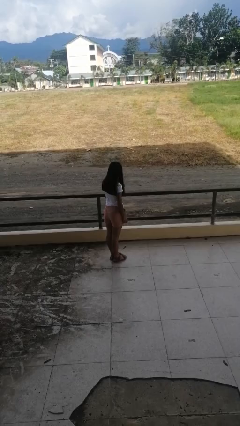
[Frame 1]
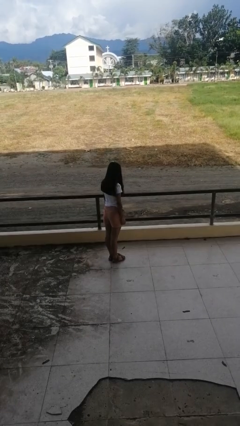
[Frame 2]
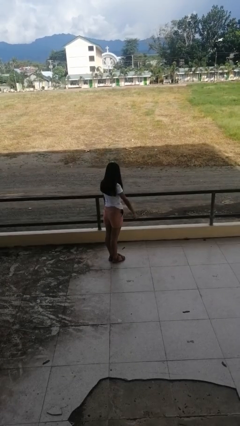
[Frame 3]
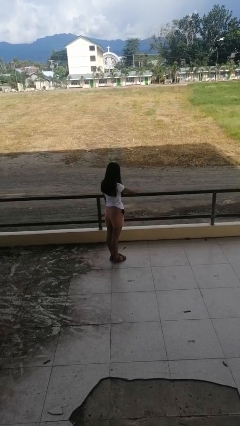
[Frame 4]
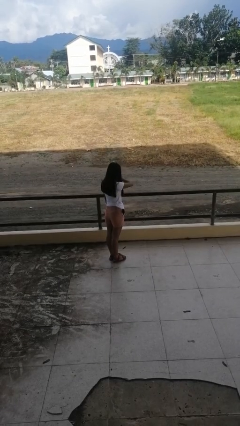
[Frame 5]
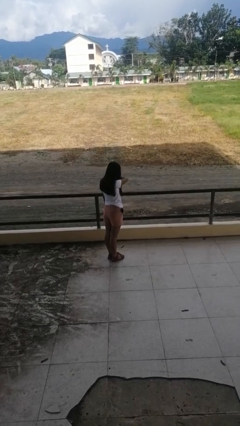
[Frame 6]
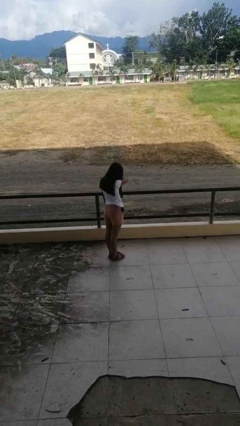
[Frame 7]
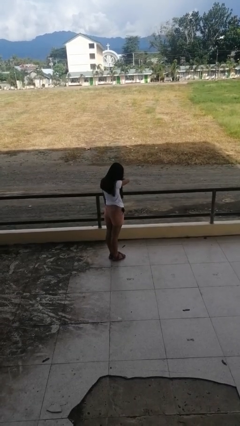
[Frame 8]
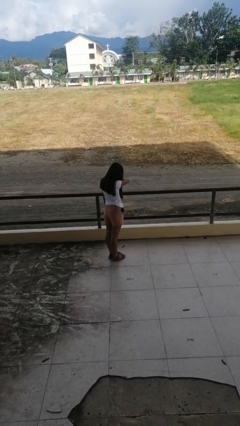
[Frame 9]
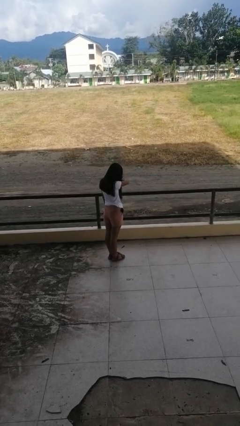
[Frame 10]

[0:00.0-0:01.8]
person sneezes into arm

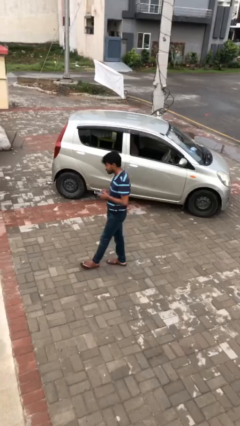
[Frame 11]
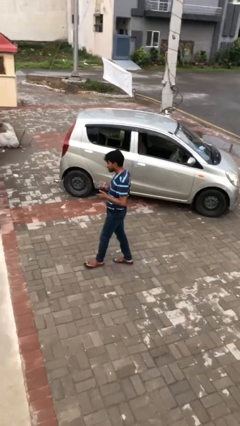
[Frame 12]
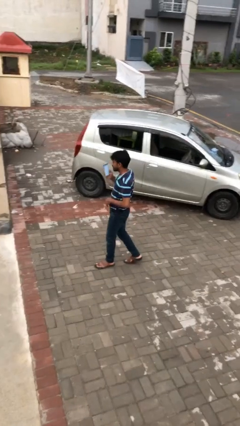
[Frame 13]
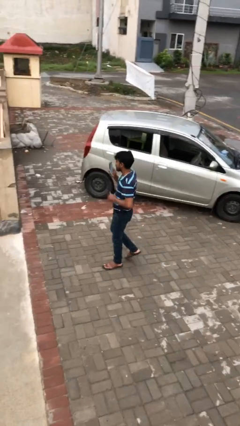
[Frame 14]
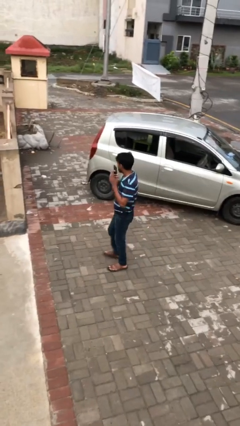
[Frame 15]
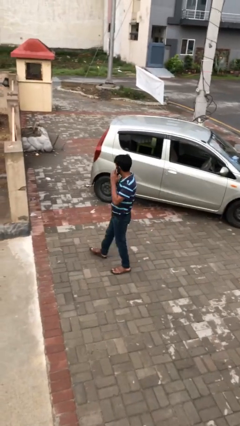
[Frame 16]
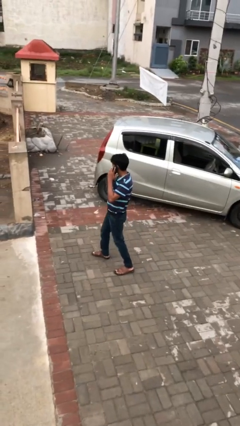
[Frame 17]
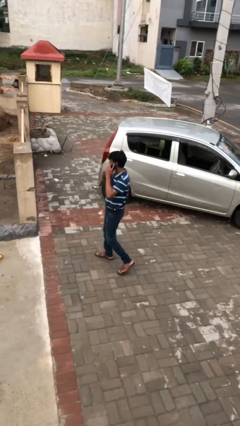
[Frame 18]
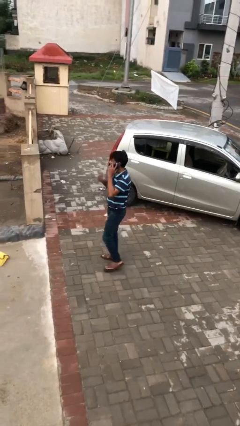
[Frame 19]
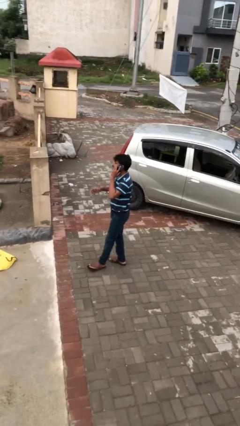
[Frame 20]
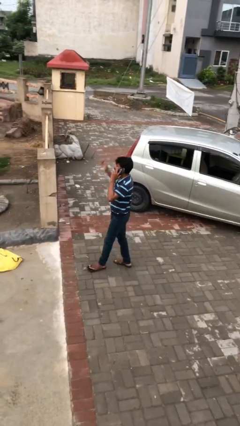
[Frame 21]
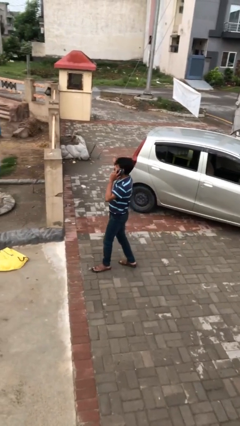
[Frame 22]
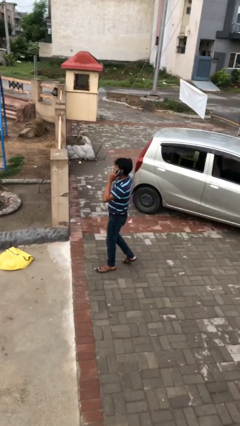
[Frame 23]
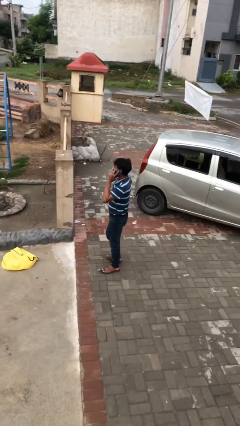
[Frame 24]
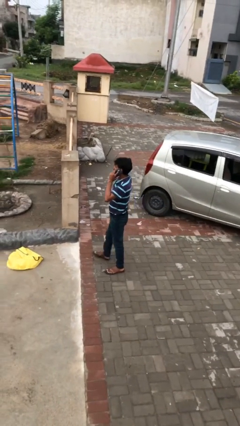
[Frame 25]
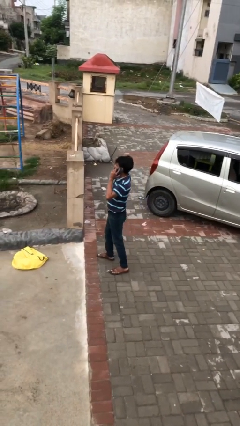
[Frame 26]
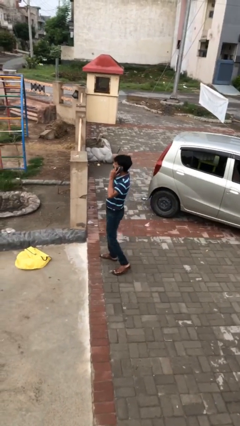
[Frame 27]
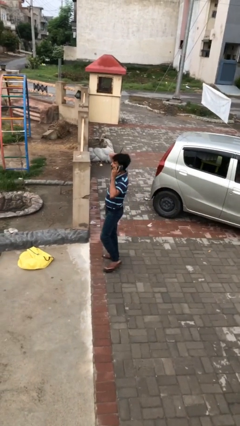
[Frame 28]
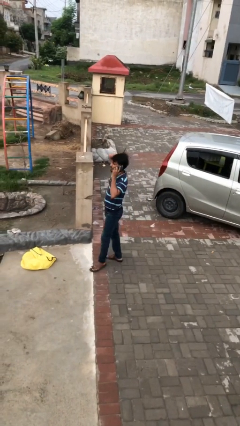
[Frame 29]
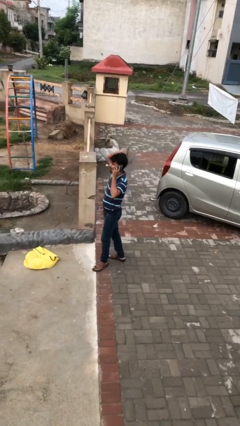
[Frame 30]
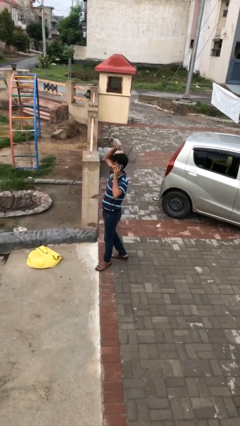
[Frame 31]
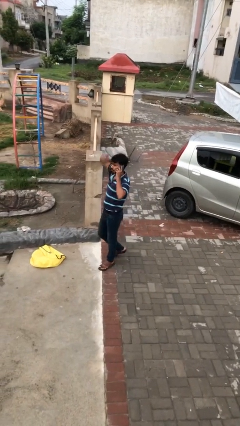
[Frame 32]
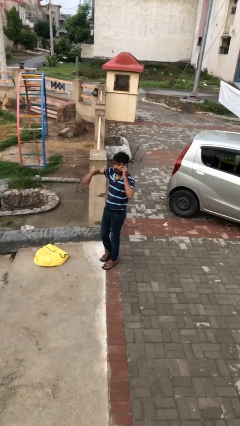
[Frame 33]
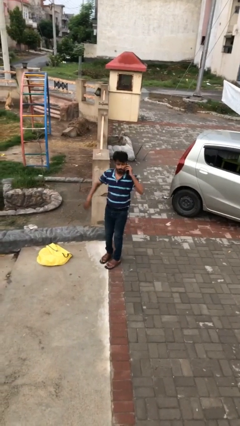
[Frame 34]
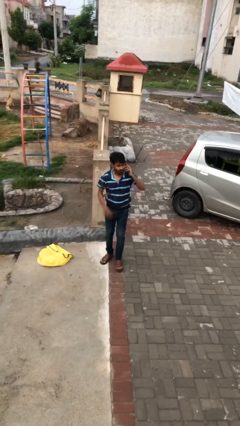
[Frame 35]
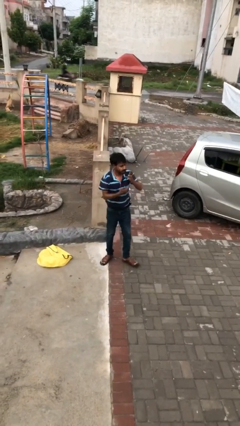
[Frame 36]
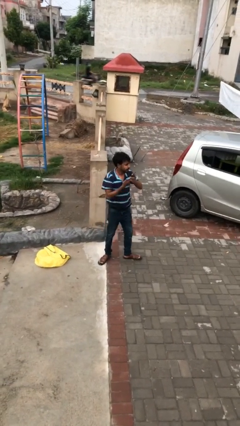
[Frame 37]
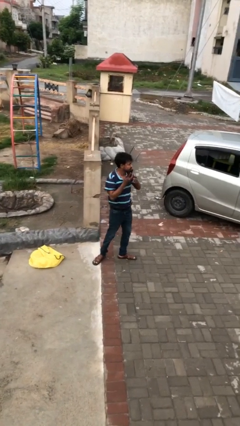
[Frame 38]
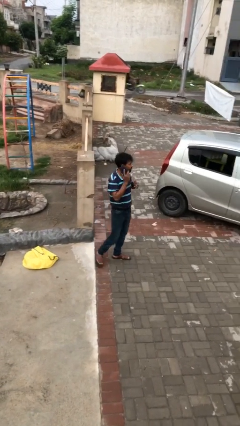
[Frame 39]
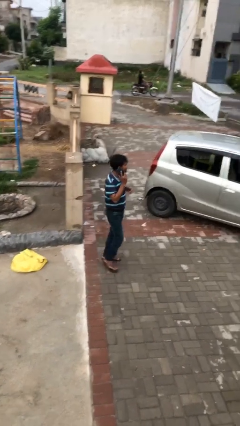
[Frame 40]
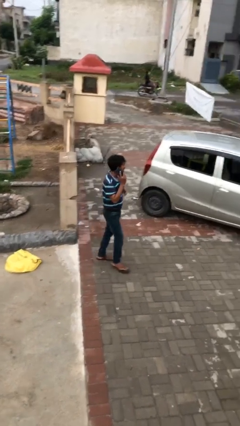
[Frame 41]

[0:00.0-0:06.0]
person talks on phone

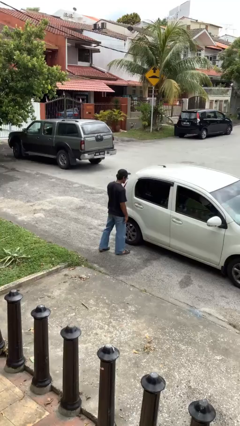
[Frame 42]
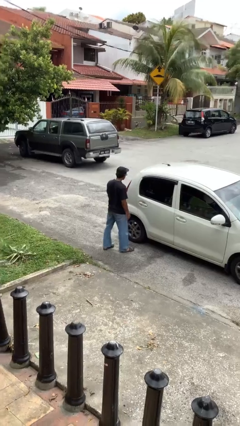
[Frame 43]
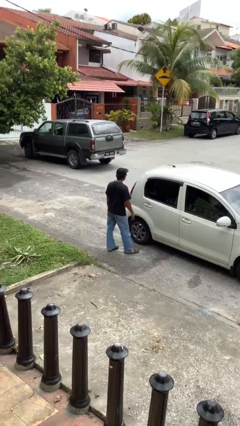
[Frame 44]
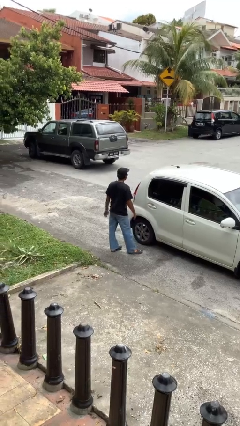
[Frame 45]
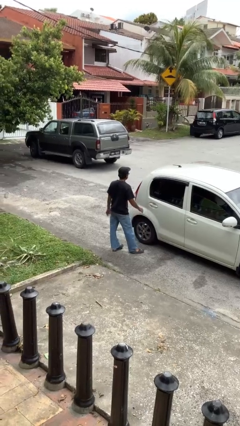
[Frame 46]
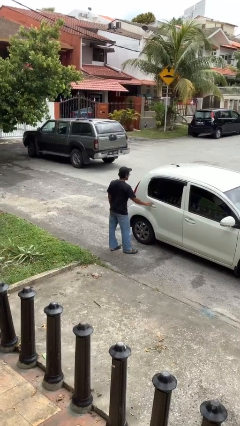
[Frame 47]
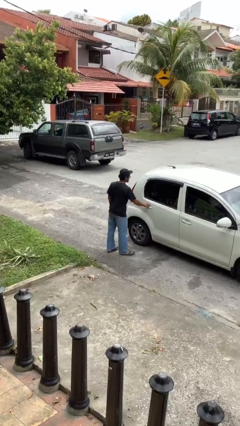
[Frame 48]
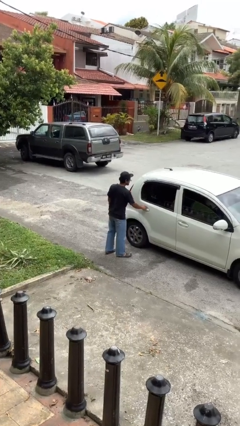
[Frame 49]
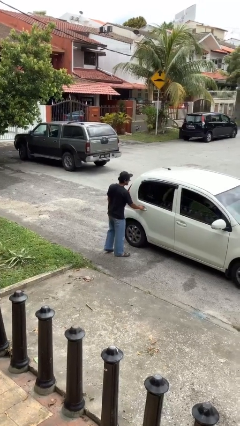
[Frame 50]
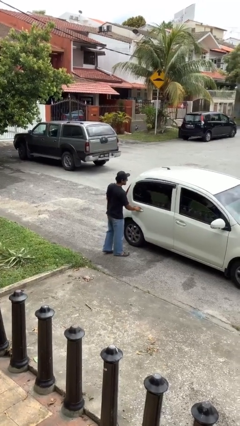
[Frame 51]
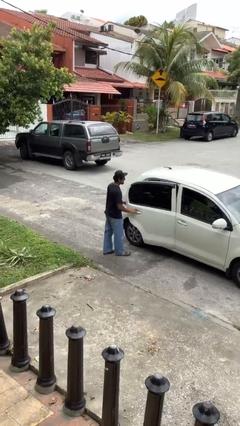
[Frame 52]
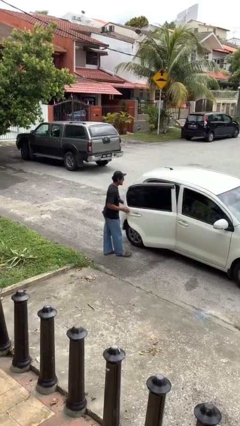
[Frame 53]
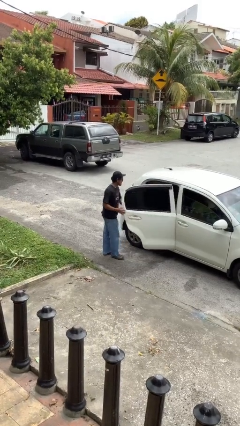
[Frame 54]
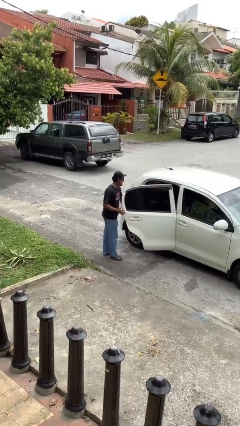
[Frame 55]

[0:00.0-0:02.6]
person opens car door

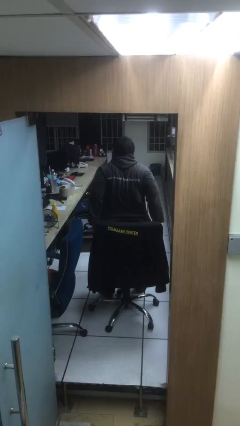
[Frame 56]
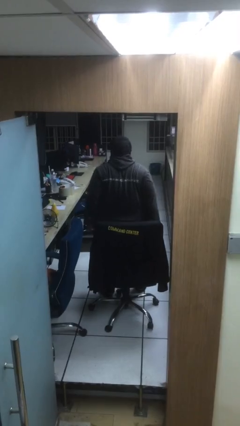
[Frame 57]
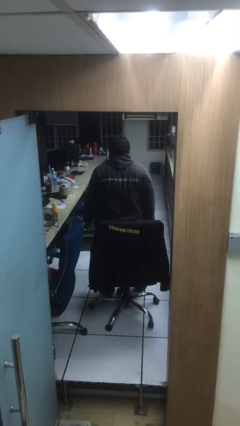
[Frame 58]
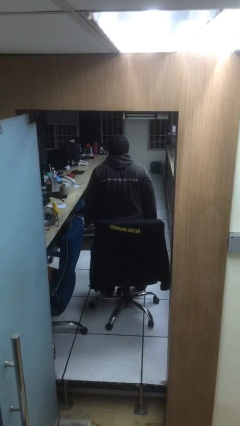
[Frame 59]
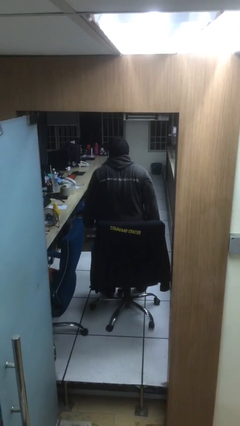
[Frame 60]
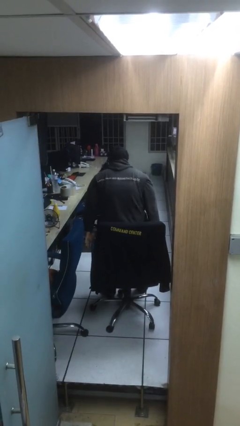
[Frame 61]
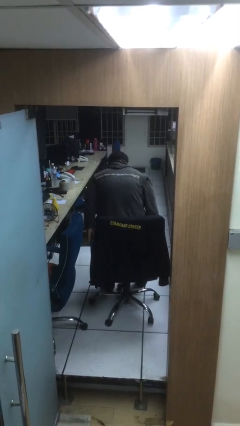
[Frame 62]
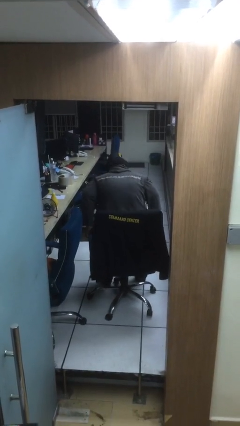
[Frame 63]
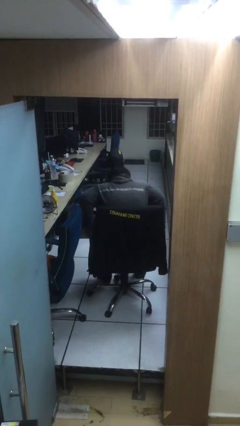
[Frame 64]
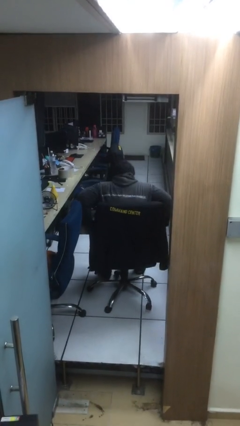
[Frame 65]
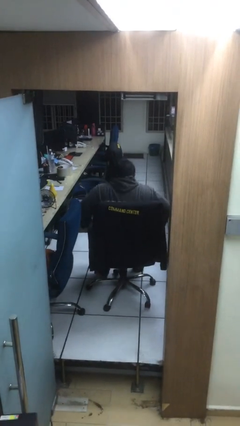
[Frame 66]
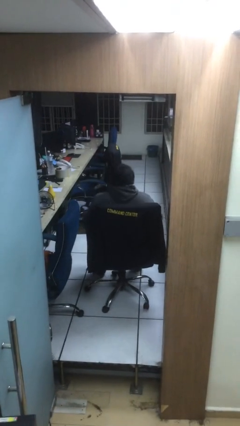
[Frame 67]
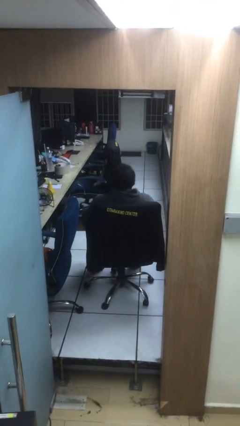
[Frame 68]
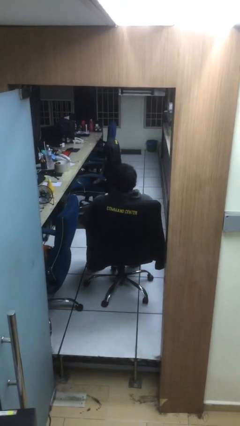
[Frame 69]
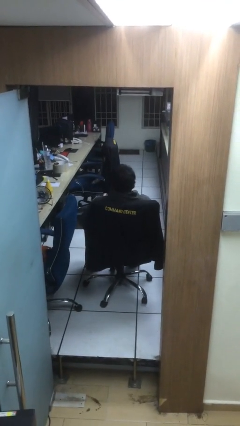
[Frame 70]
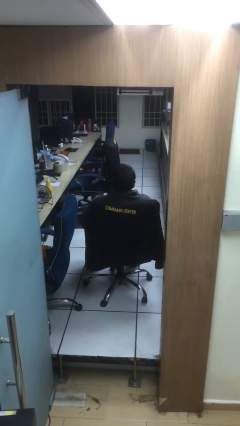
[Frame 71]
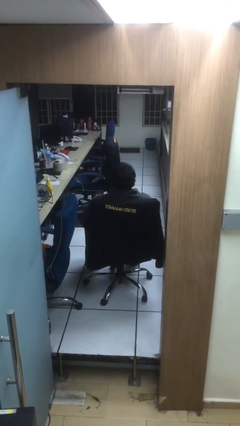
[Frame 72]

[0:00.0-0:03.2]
person sits down

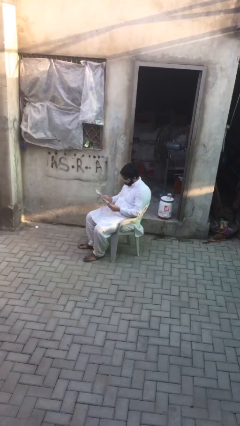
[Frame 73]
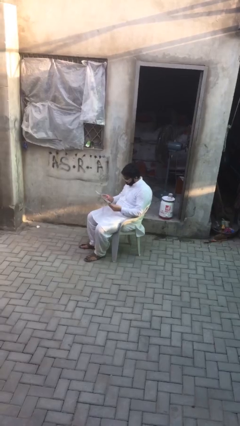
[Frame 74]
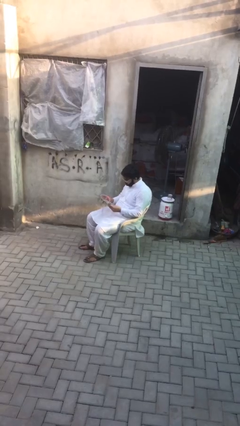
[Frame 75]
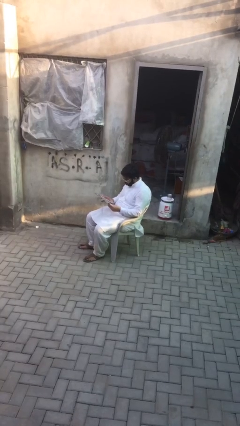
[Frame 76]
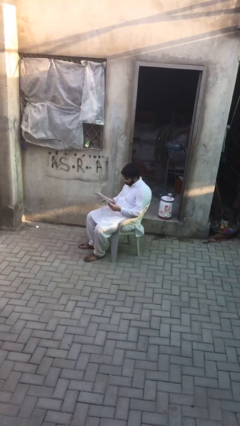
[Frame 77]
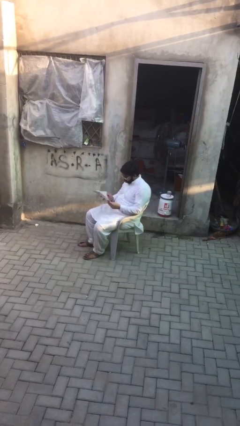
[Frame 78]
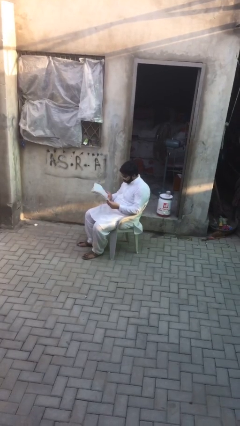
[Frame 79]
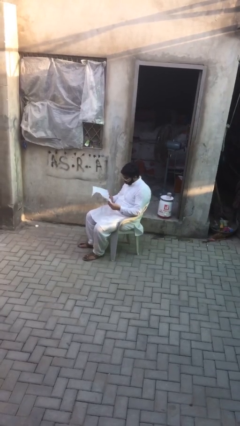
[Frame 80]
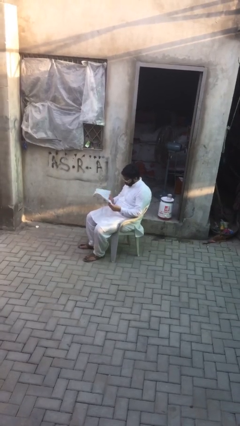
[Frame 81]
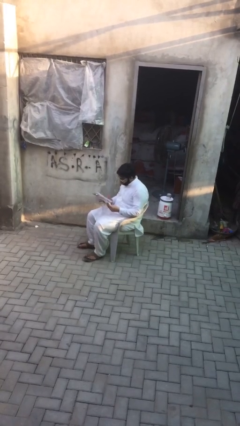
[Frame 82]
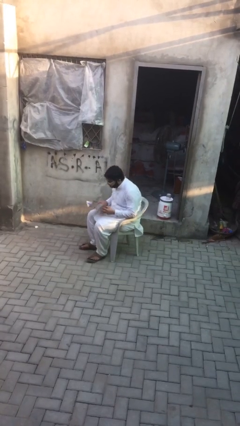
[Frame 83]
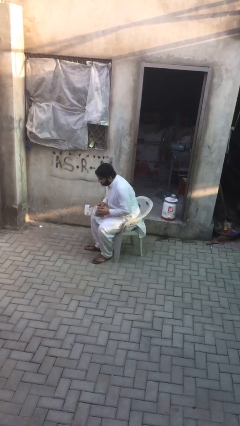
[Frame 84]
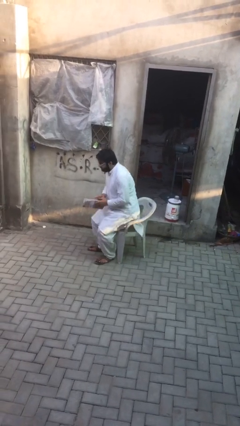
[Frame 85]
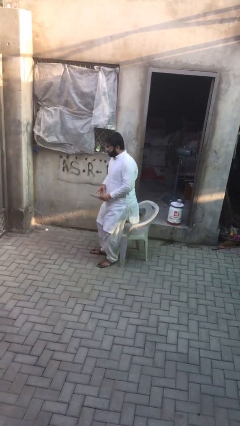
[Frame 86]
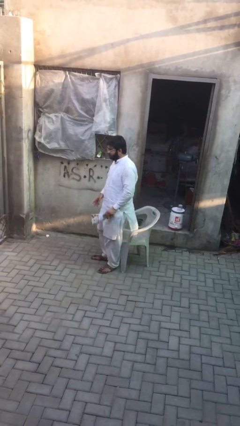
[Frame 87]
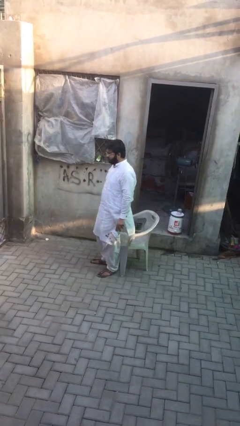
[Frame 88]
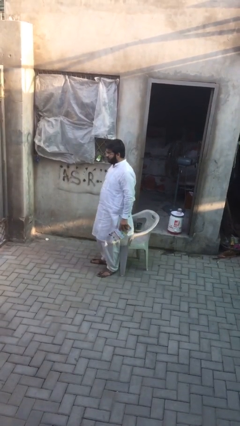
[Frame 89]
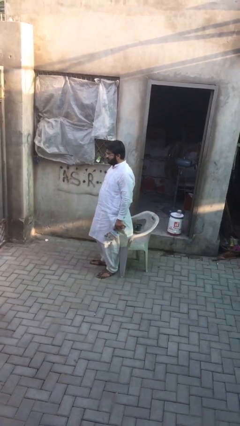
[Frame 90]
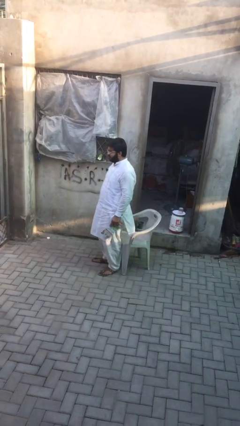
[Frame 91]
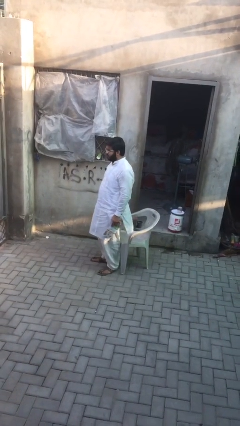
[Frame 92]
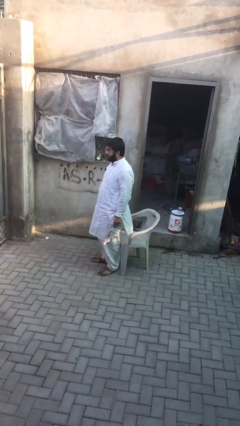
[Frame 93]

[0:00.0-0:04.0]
person stands up
